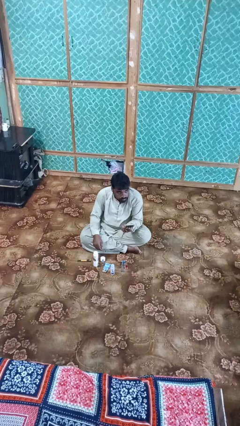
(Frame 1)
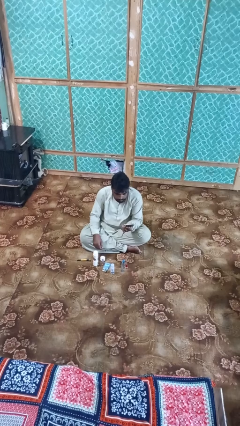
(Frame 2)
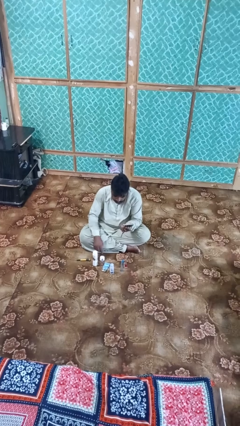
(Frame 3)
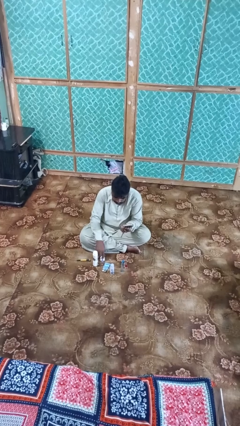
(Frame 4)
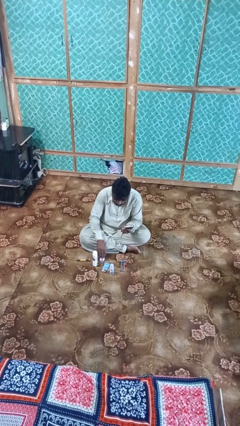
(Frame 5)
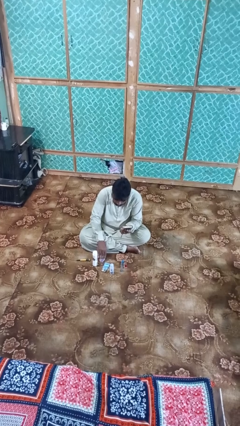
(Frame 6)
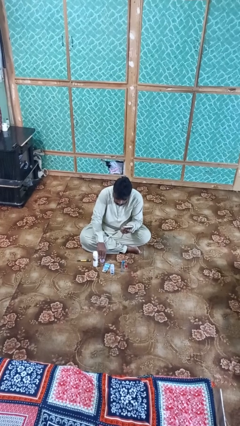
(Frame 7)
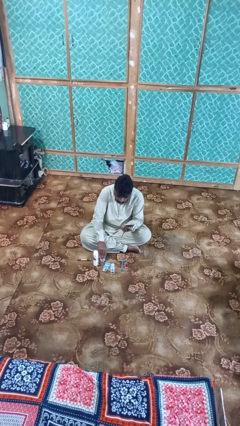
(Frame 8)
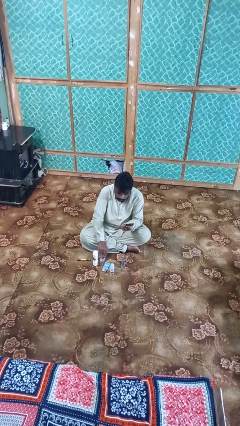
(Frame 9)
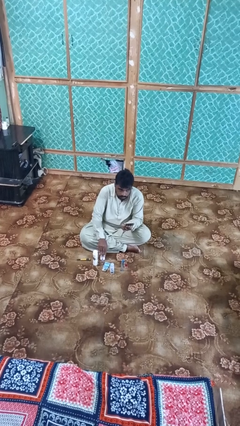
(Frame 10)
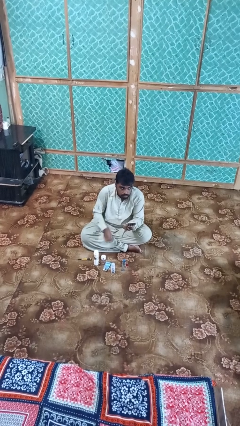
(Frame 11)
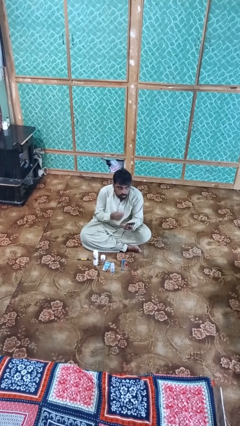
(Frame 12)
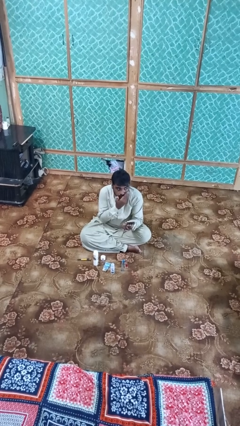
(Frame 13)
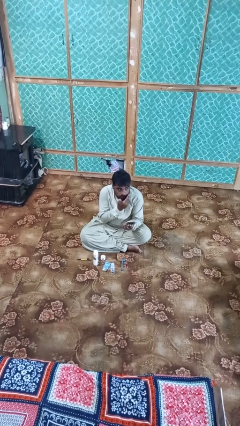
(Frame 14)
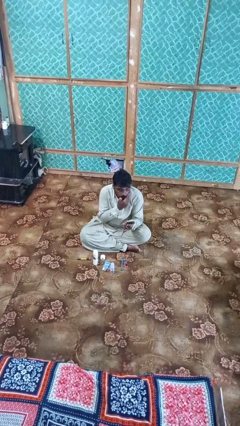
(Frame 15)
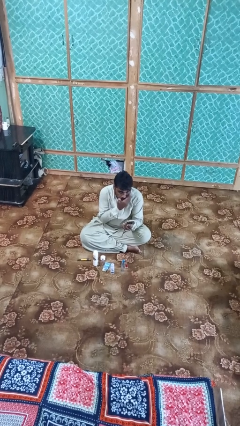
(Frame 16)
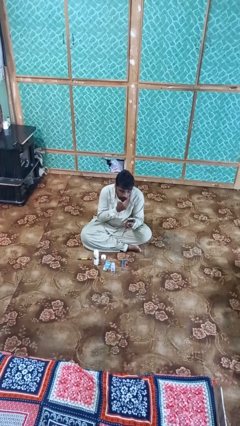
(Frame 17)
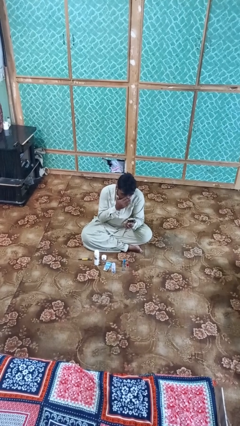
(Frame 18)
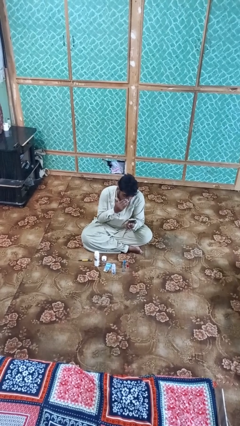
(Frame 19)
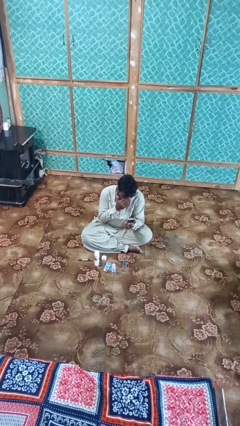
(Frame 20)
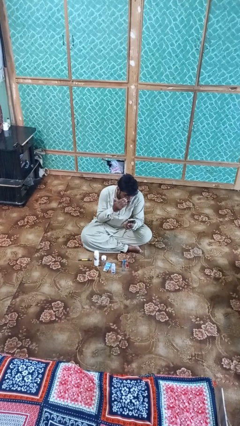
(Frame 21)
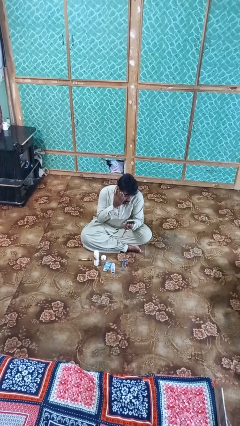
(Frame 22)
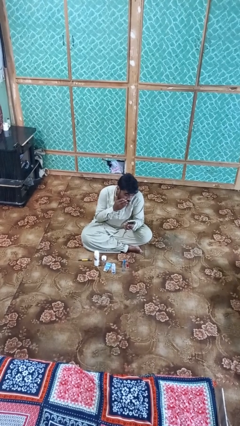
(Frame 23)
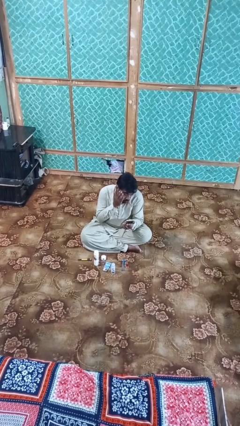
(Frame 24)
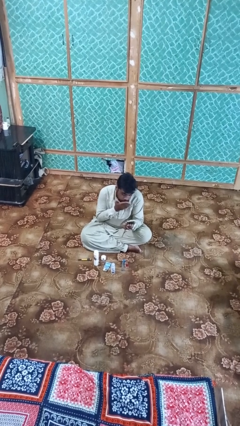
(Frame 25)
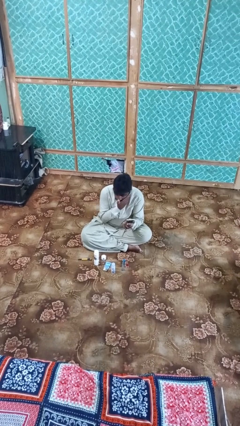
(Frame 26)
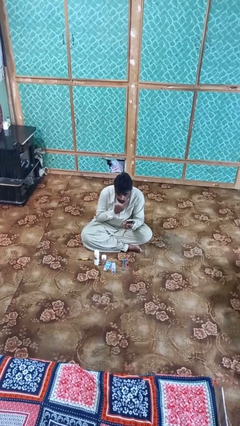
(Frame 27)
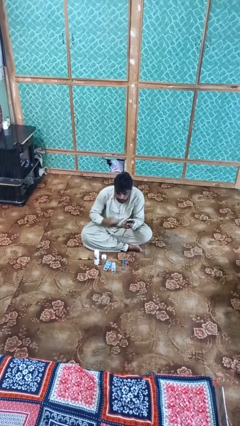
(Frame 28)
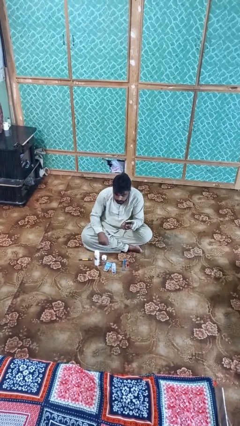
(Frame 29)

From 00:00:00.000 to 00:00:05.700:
person applies foundation makeup

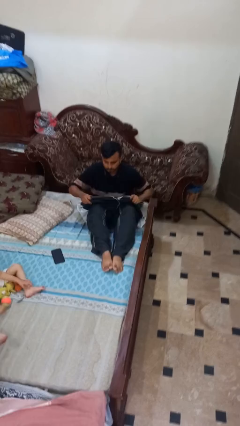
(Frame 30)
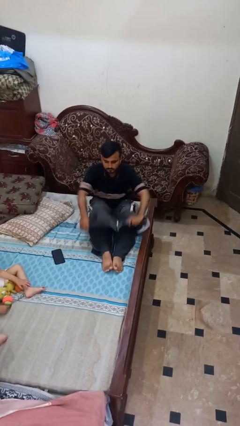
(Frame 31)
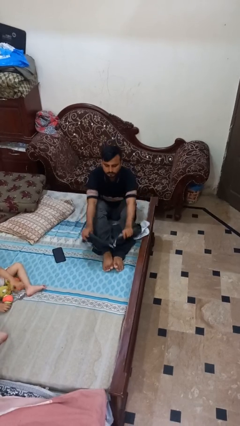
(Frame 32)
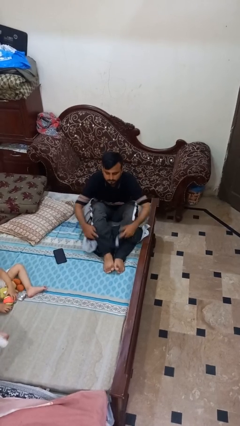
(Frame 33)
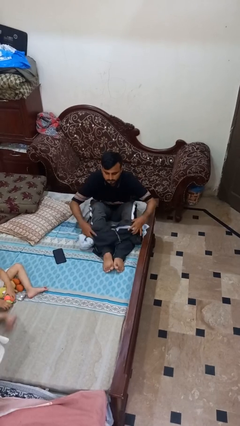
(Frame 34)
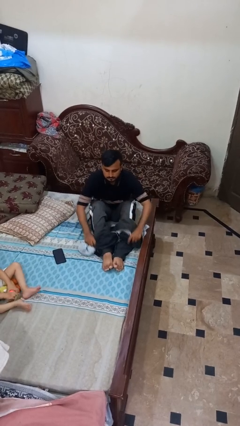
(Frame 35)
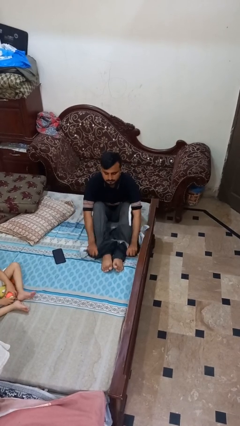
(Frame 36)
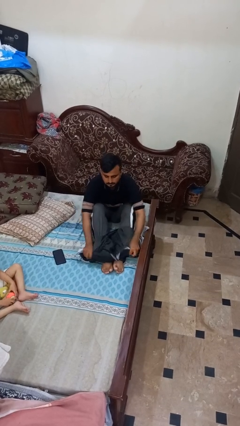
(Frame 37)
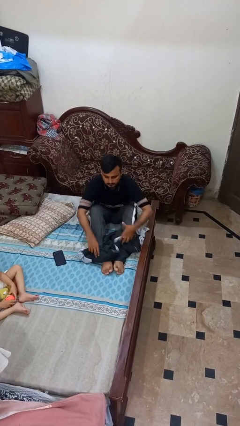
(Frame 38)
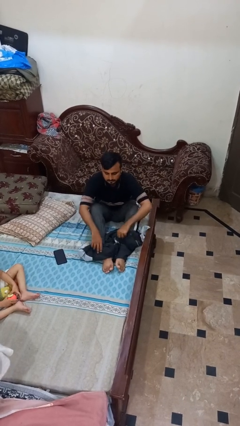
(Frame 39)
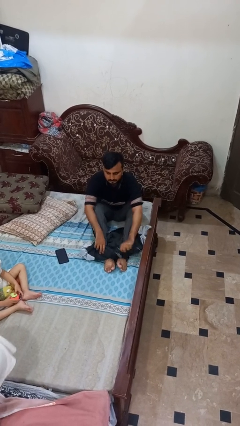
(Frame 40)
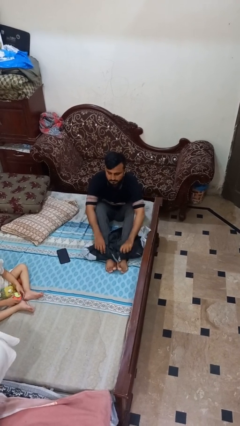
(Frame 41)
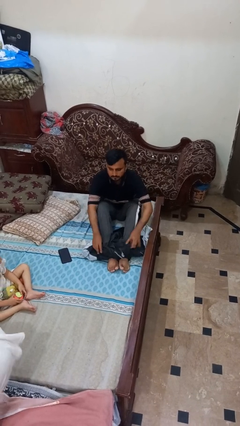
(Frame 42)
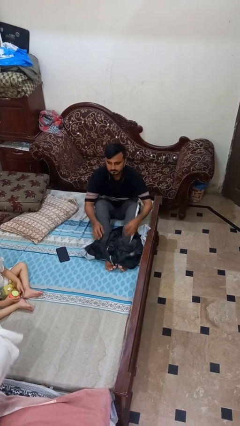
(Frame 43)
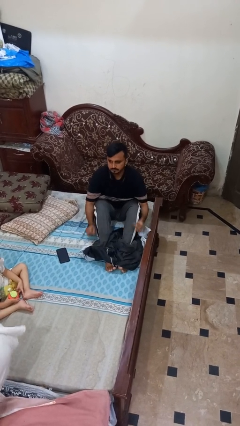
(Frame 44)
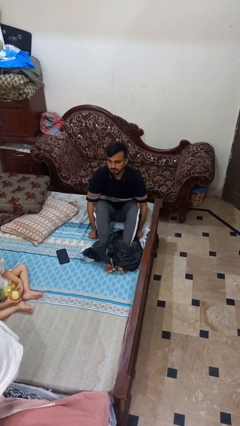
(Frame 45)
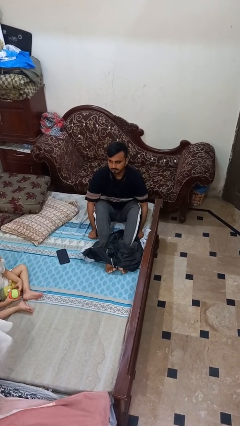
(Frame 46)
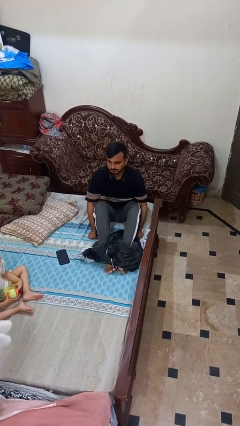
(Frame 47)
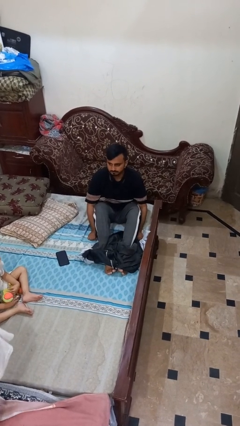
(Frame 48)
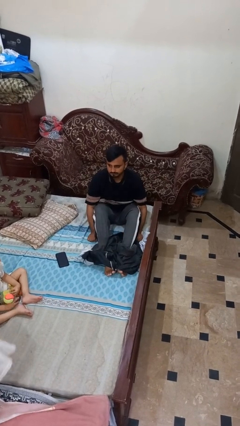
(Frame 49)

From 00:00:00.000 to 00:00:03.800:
person takes off pants

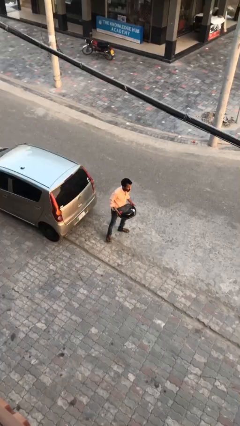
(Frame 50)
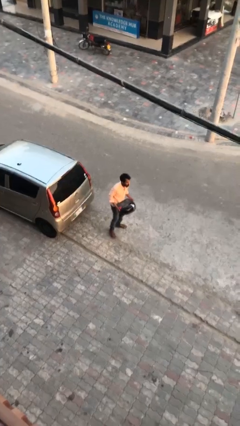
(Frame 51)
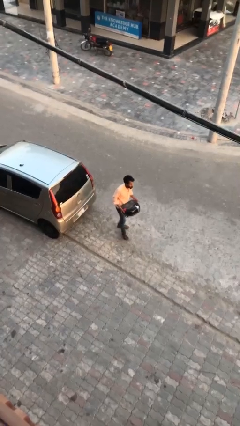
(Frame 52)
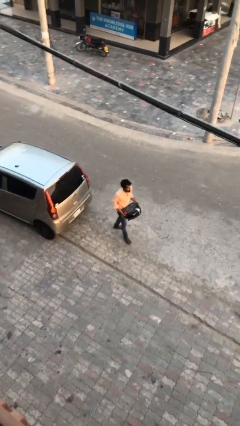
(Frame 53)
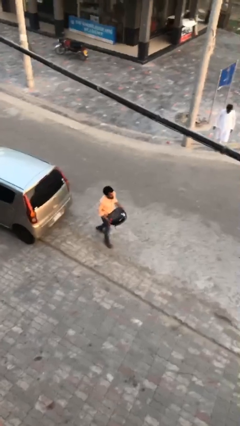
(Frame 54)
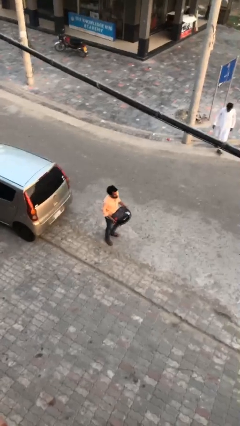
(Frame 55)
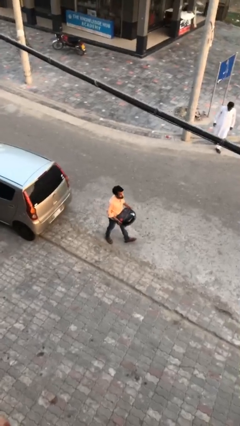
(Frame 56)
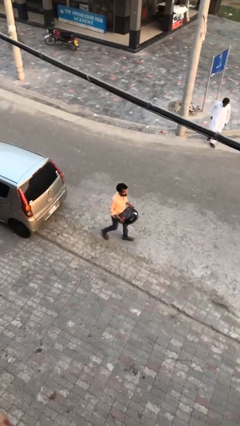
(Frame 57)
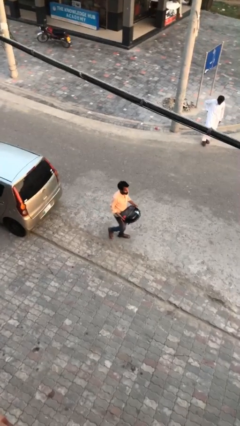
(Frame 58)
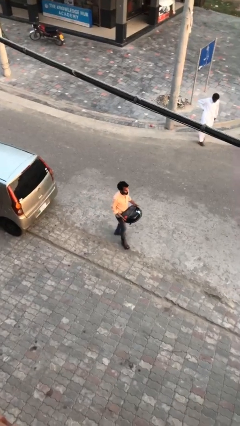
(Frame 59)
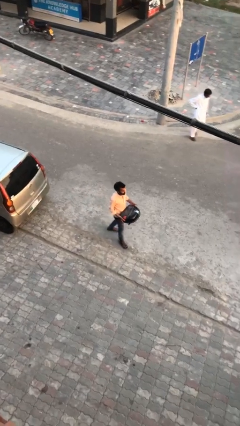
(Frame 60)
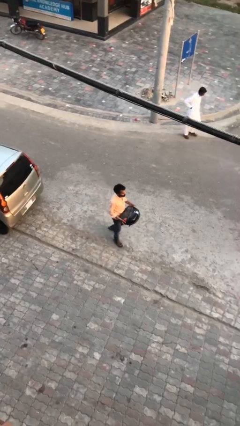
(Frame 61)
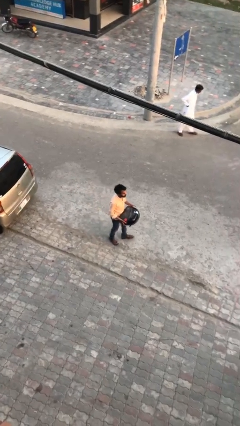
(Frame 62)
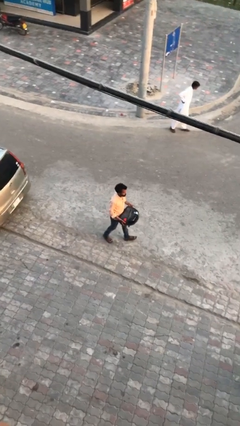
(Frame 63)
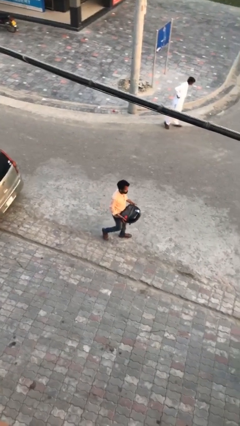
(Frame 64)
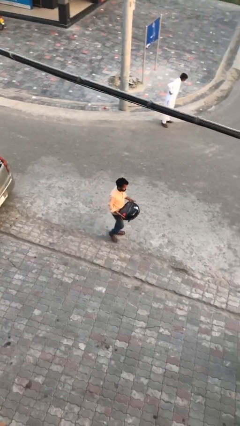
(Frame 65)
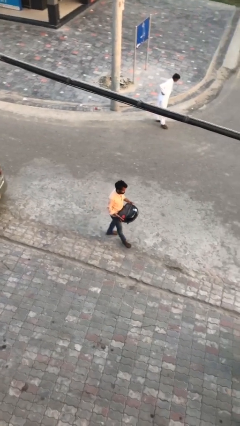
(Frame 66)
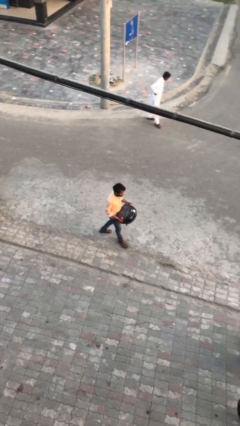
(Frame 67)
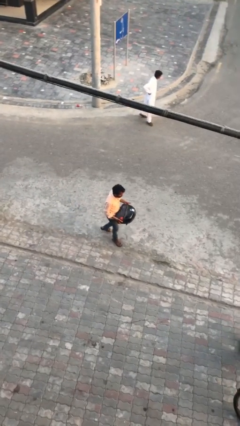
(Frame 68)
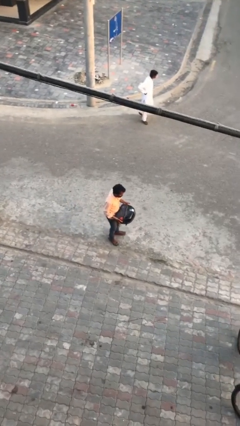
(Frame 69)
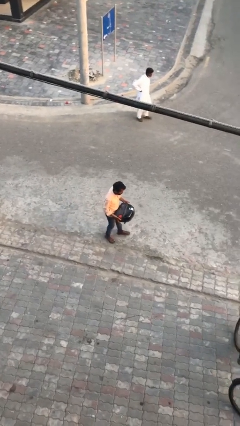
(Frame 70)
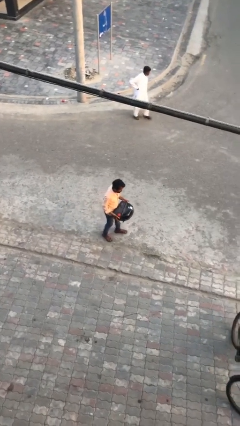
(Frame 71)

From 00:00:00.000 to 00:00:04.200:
person carries heavy object

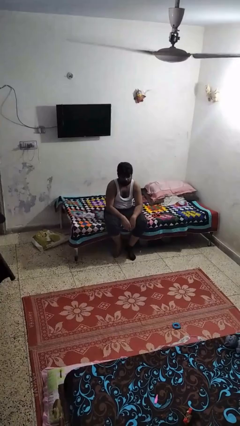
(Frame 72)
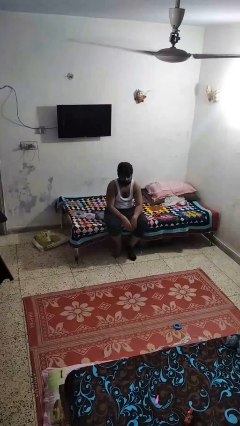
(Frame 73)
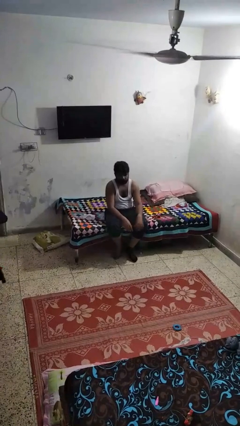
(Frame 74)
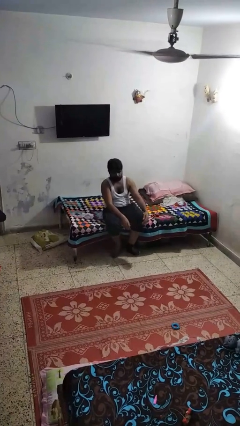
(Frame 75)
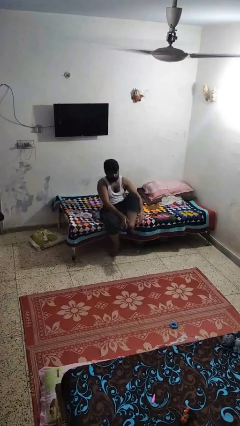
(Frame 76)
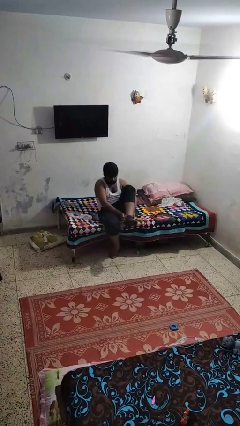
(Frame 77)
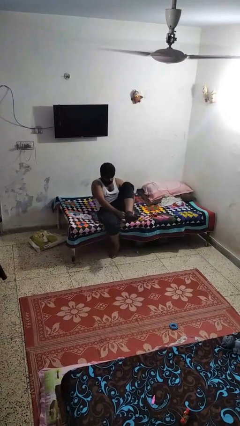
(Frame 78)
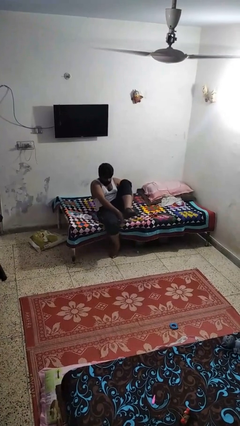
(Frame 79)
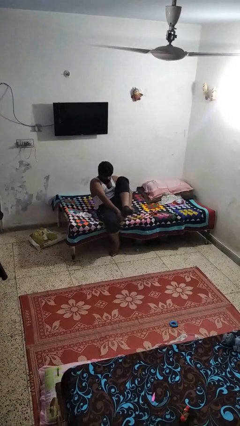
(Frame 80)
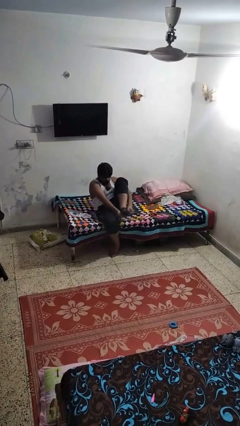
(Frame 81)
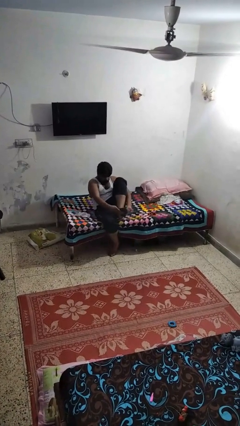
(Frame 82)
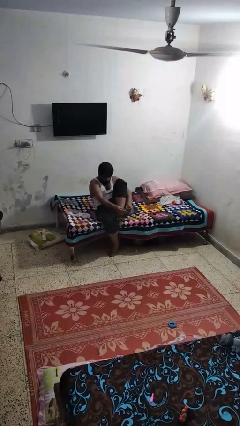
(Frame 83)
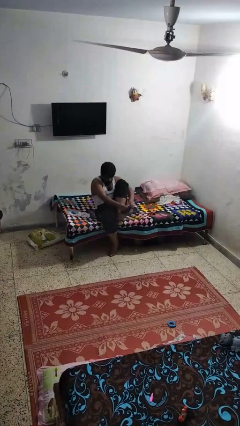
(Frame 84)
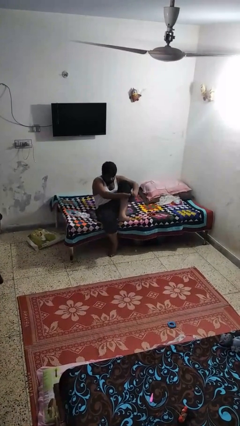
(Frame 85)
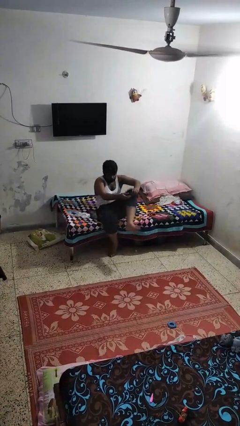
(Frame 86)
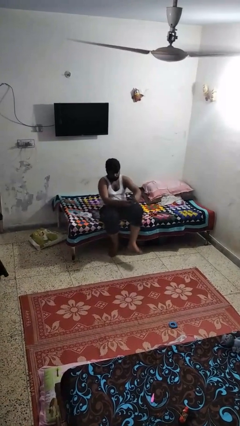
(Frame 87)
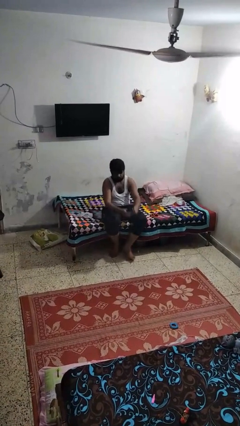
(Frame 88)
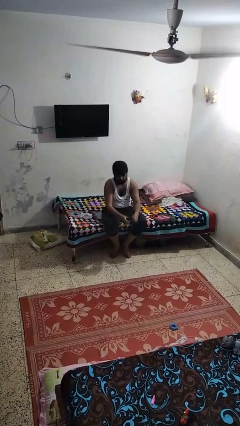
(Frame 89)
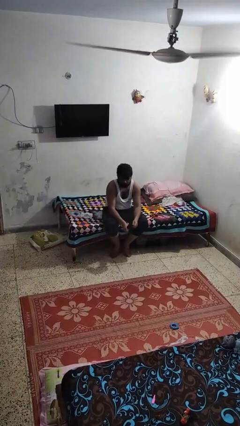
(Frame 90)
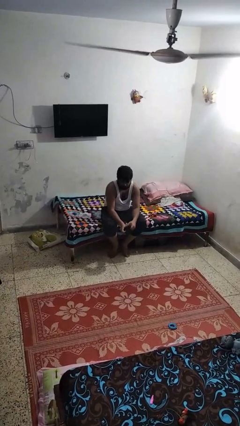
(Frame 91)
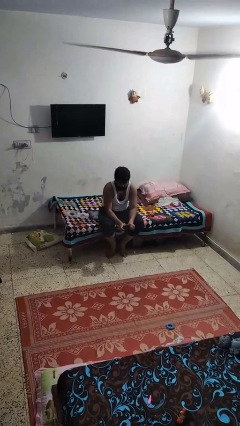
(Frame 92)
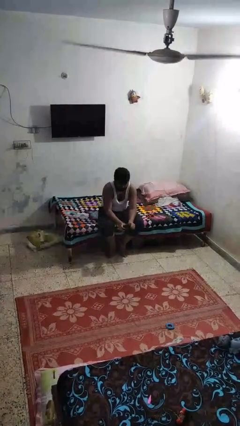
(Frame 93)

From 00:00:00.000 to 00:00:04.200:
person takes off socks
